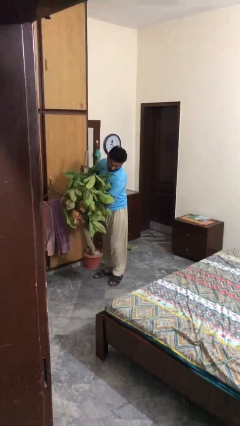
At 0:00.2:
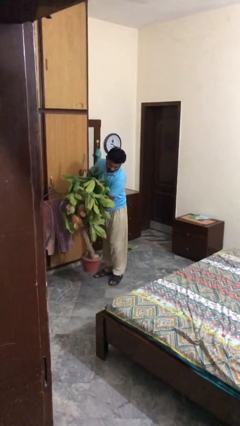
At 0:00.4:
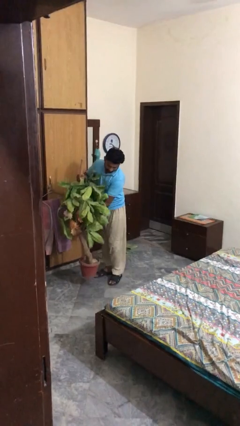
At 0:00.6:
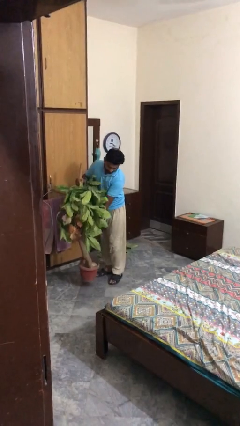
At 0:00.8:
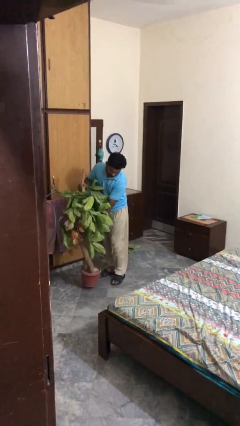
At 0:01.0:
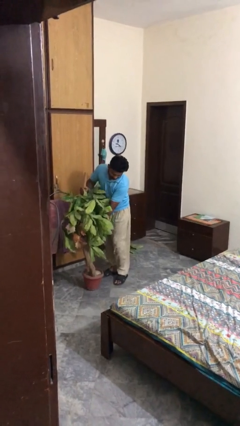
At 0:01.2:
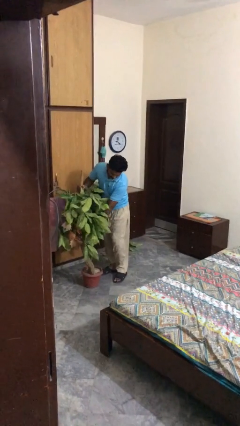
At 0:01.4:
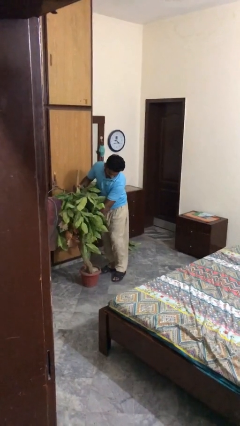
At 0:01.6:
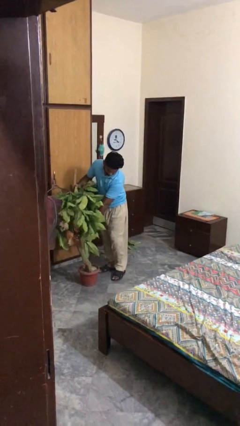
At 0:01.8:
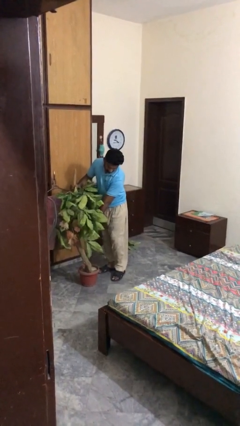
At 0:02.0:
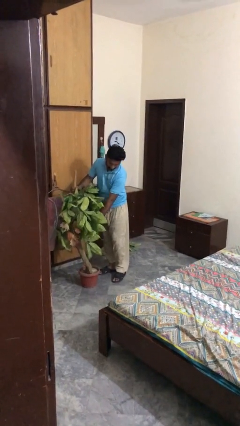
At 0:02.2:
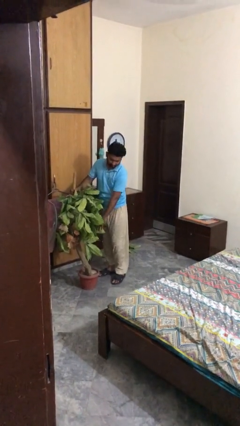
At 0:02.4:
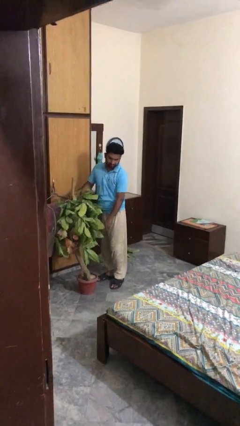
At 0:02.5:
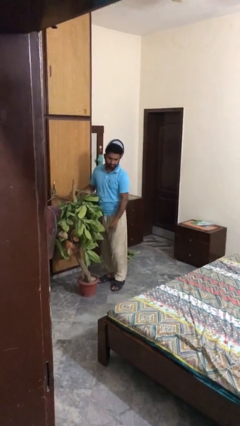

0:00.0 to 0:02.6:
person puts down object on floor

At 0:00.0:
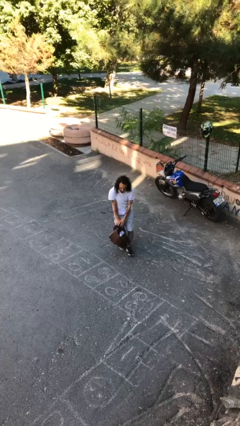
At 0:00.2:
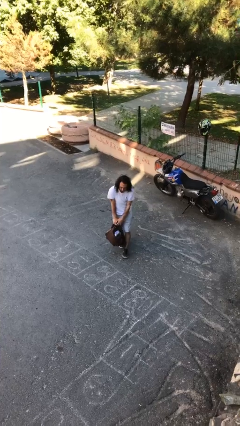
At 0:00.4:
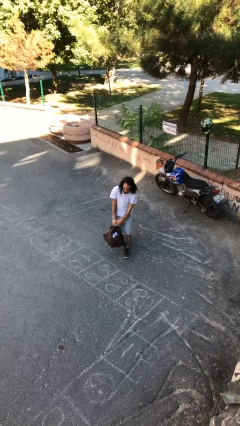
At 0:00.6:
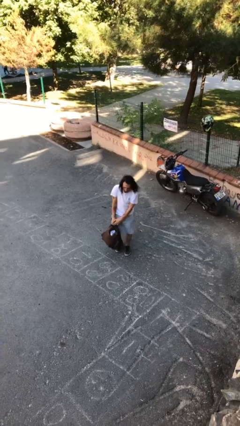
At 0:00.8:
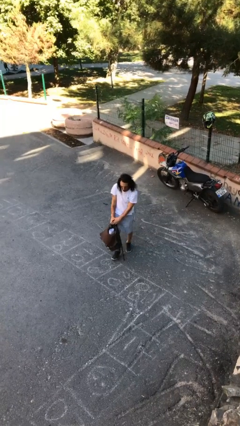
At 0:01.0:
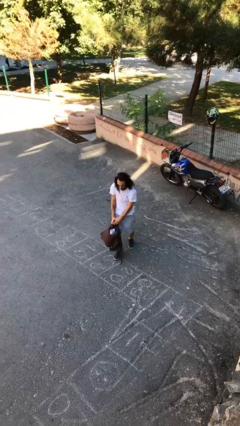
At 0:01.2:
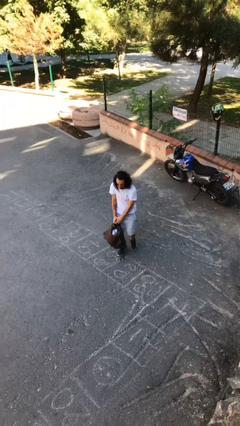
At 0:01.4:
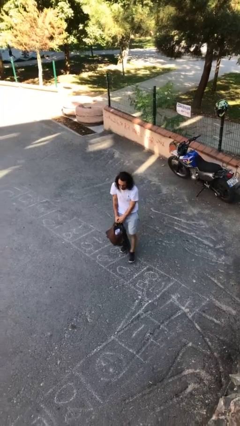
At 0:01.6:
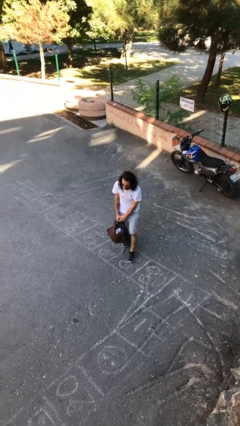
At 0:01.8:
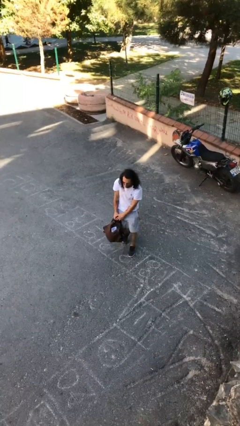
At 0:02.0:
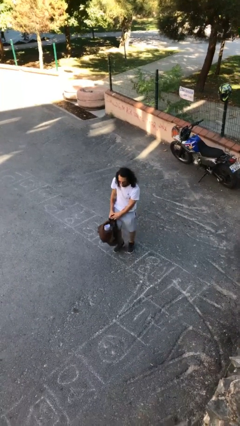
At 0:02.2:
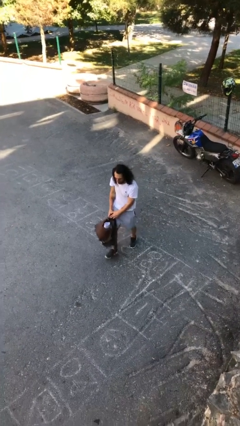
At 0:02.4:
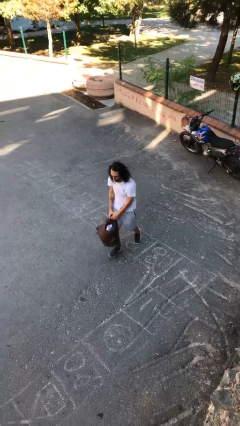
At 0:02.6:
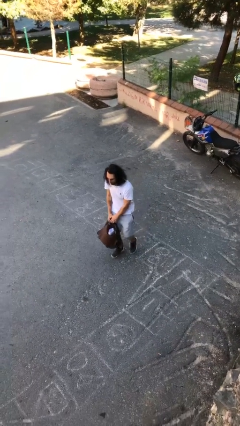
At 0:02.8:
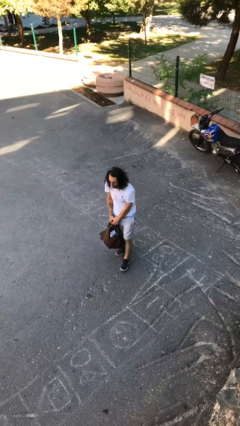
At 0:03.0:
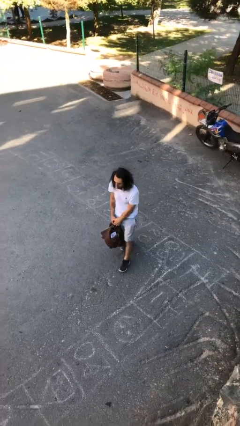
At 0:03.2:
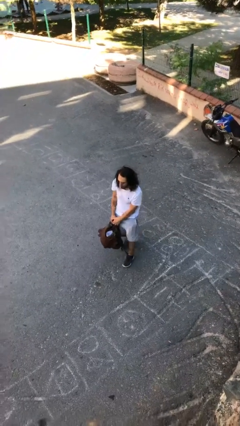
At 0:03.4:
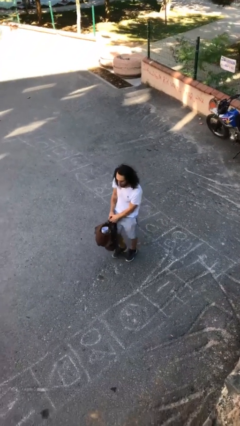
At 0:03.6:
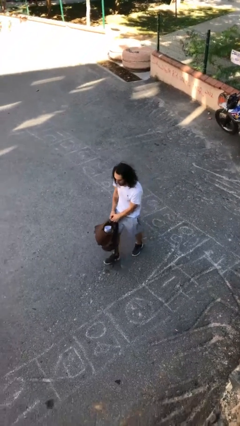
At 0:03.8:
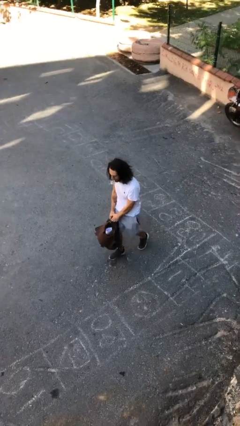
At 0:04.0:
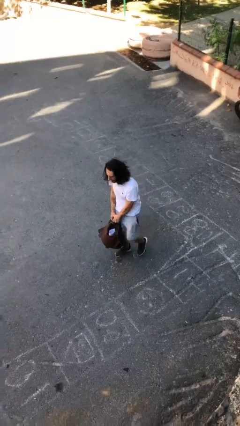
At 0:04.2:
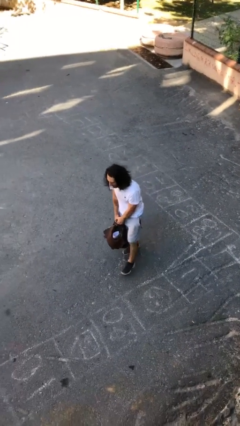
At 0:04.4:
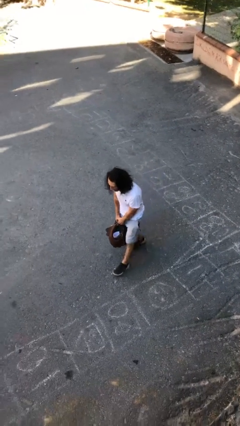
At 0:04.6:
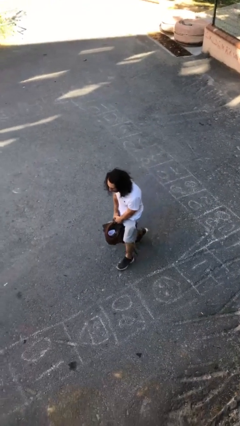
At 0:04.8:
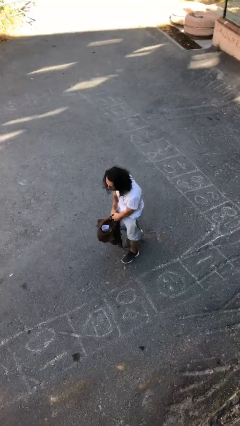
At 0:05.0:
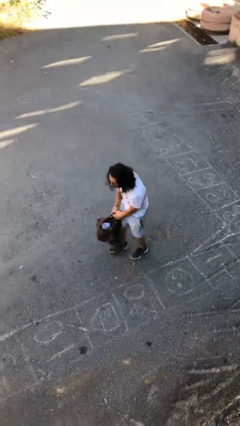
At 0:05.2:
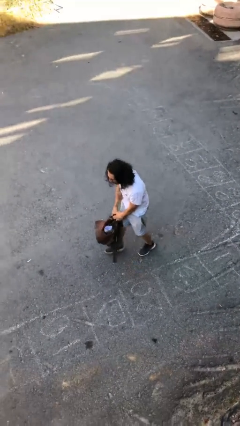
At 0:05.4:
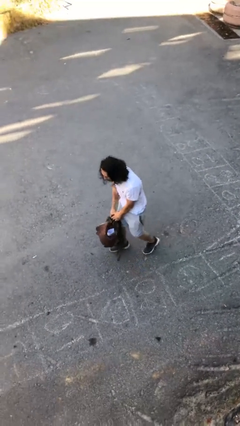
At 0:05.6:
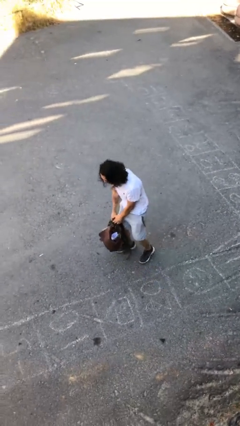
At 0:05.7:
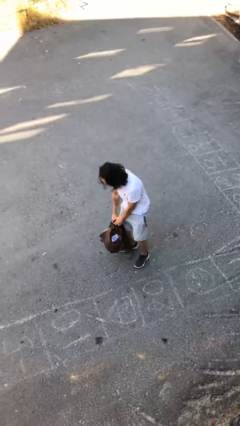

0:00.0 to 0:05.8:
person carries heavy object

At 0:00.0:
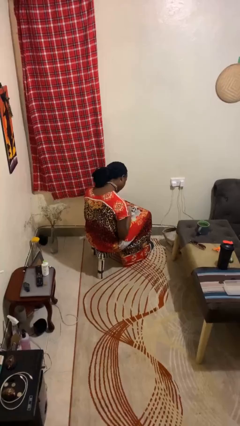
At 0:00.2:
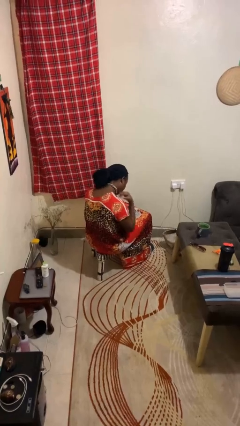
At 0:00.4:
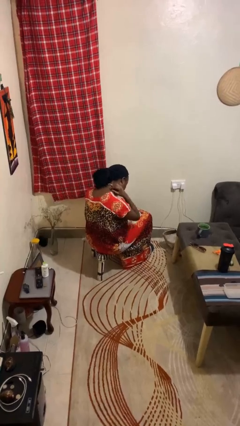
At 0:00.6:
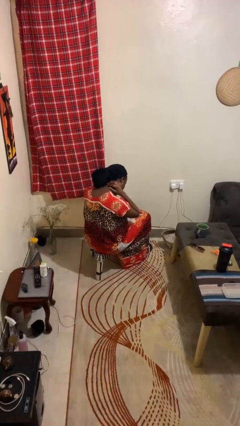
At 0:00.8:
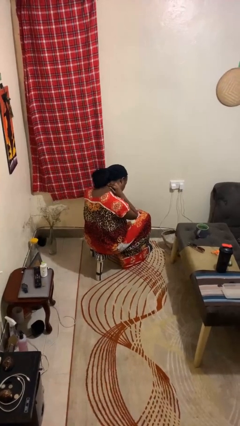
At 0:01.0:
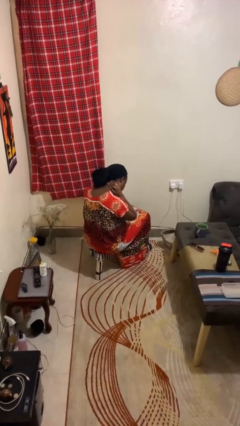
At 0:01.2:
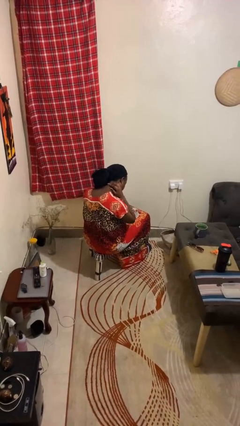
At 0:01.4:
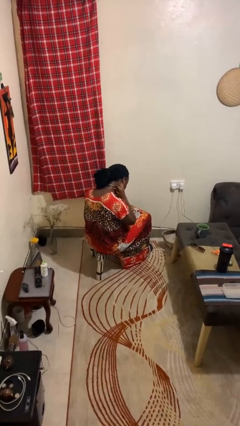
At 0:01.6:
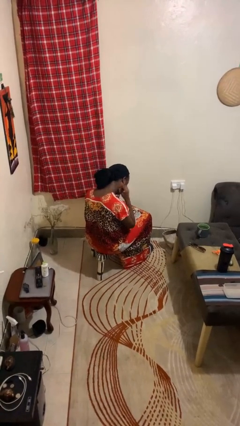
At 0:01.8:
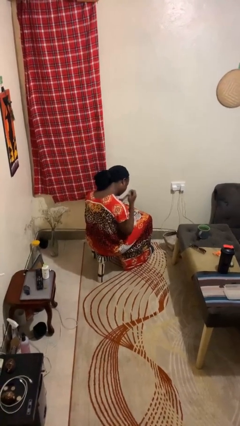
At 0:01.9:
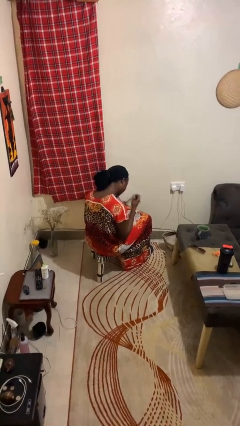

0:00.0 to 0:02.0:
person takes off necklace

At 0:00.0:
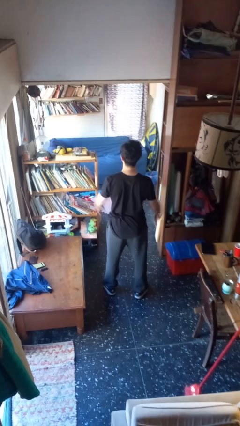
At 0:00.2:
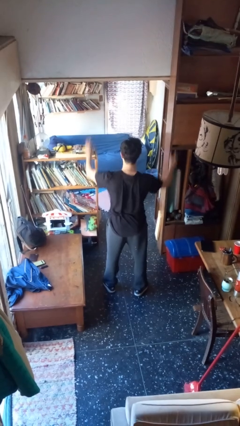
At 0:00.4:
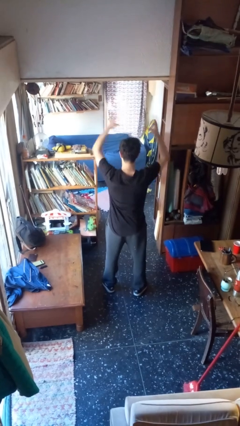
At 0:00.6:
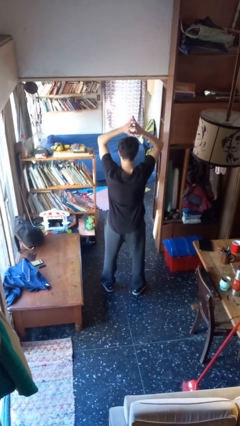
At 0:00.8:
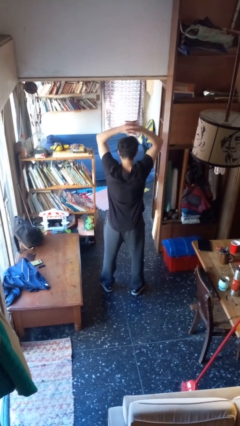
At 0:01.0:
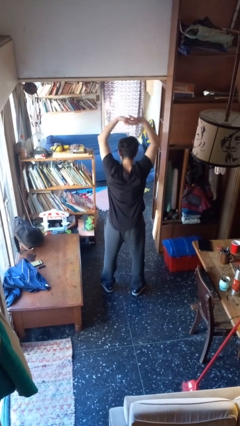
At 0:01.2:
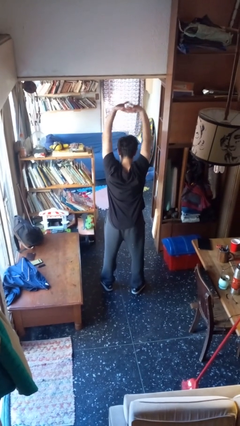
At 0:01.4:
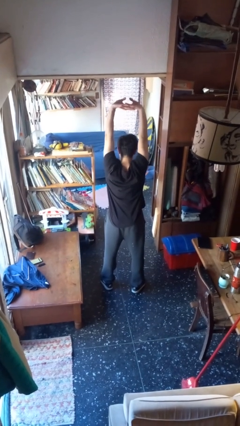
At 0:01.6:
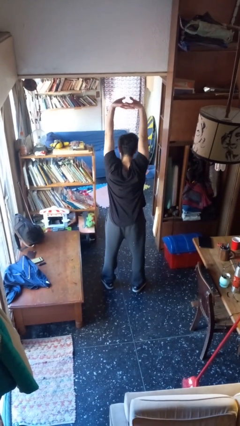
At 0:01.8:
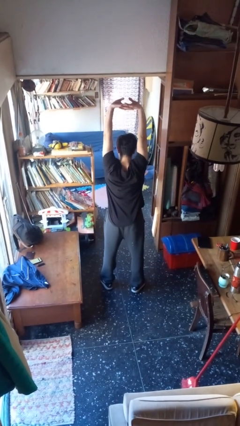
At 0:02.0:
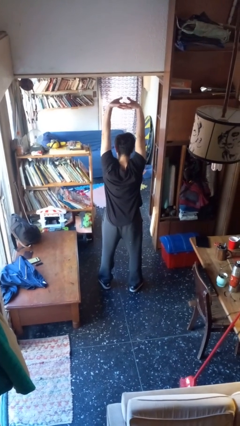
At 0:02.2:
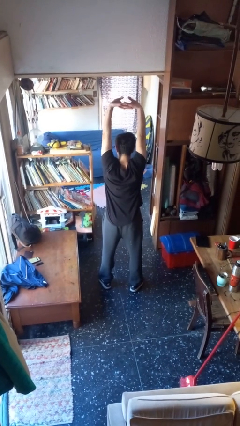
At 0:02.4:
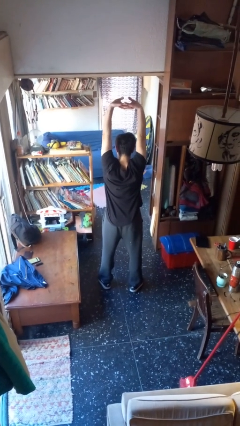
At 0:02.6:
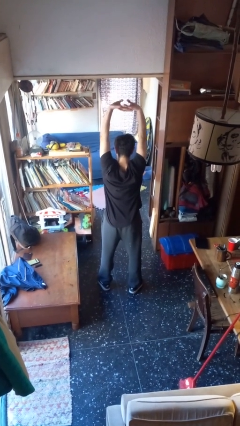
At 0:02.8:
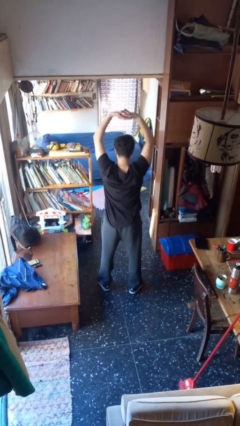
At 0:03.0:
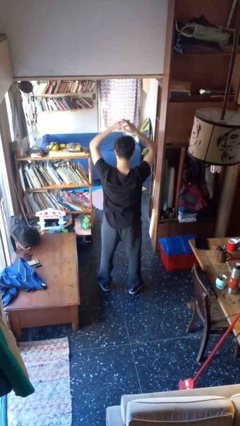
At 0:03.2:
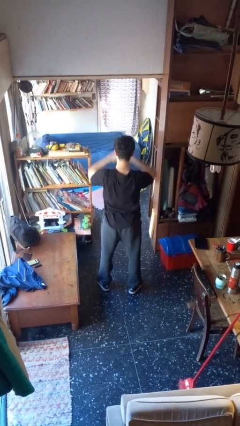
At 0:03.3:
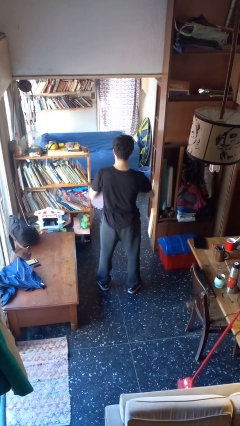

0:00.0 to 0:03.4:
person stretches arms over head

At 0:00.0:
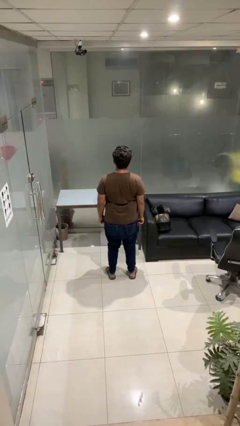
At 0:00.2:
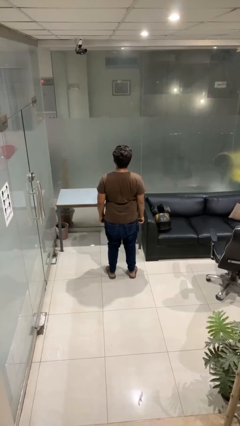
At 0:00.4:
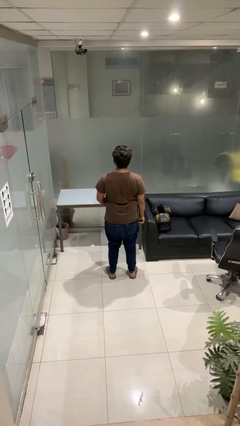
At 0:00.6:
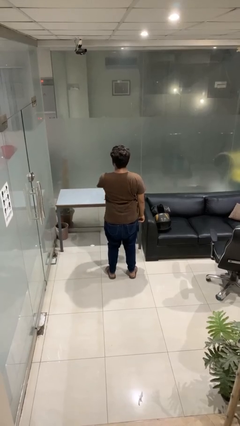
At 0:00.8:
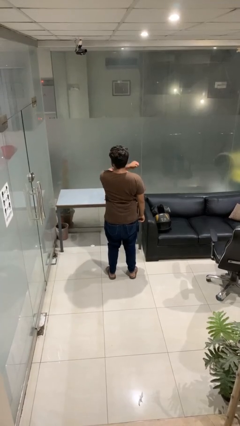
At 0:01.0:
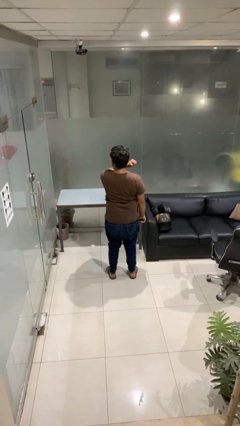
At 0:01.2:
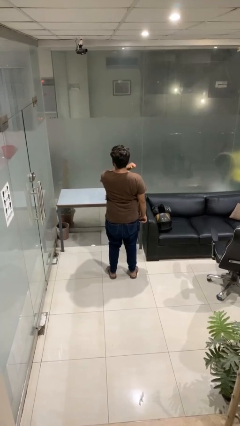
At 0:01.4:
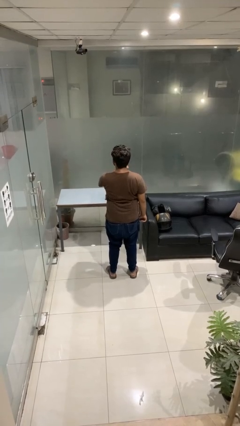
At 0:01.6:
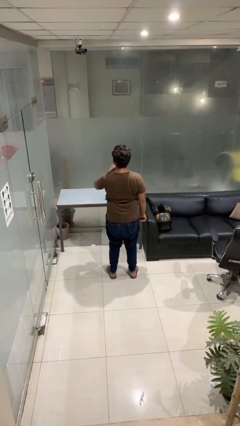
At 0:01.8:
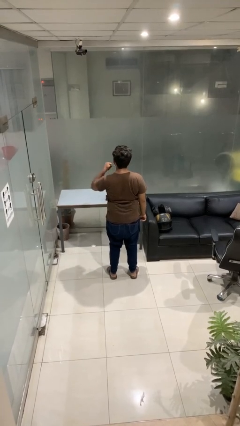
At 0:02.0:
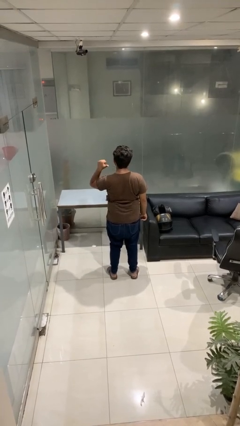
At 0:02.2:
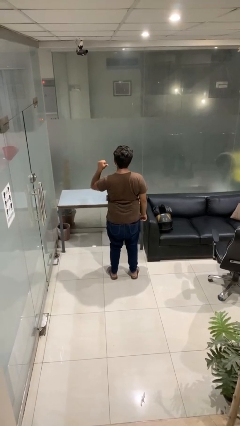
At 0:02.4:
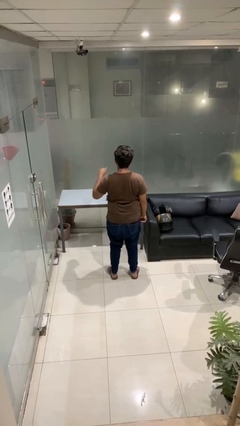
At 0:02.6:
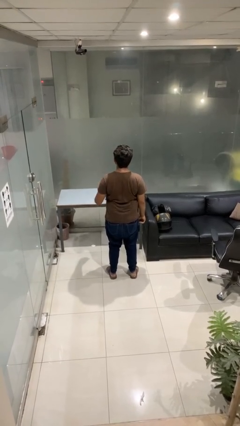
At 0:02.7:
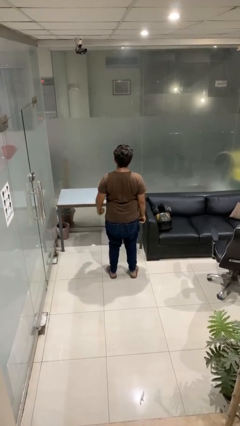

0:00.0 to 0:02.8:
person gestures cut

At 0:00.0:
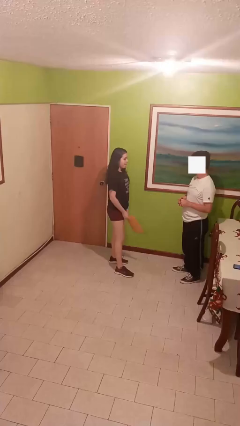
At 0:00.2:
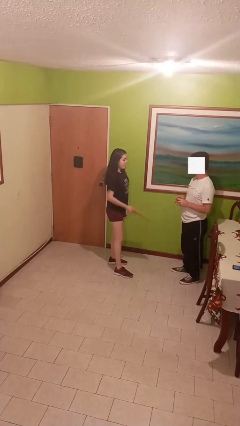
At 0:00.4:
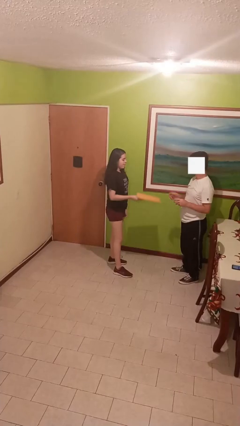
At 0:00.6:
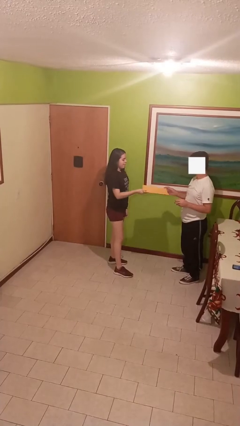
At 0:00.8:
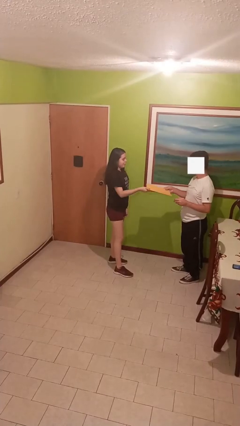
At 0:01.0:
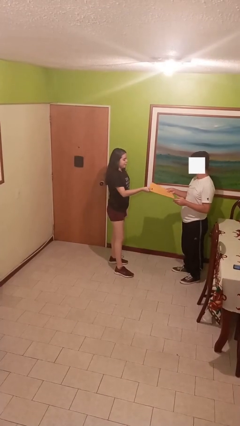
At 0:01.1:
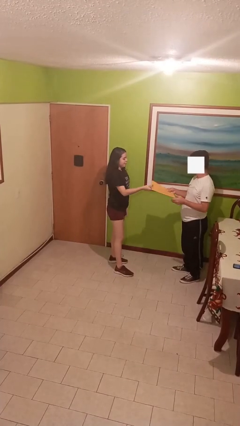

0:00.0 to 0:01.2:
person transfers object to person
